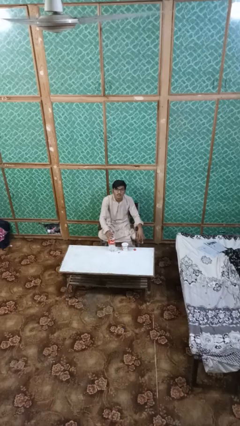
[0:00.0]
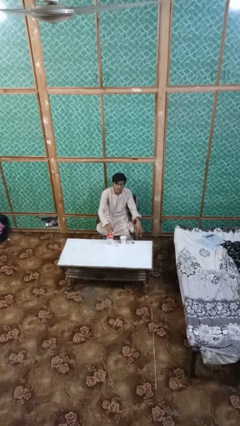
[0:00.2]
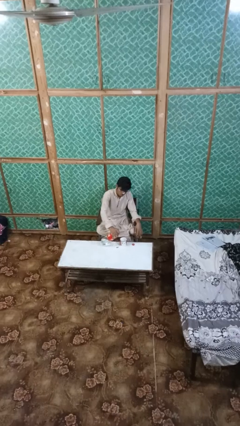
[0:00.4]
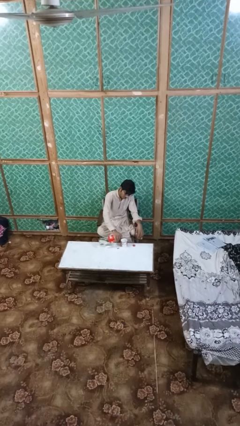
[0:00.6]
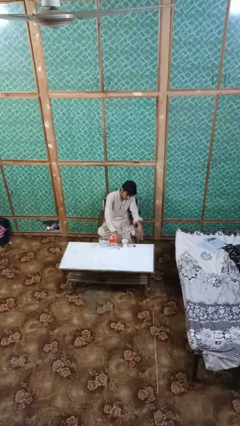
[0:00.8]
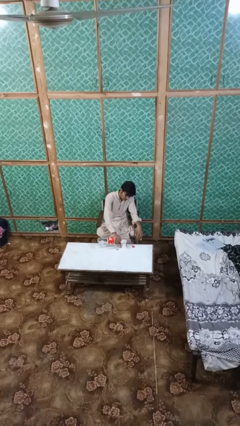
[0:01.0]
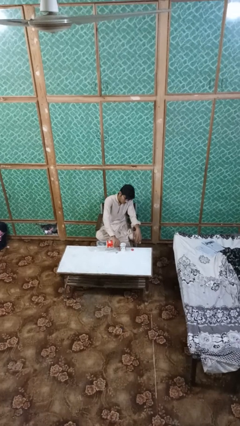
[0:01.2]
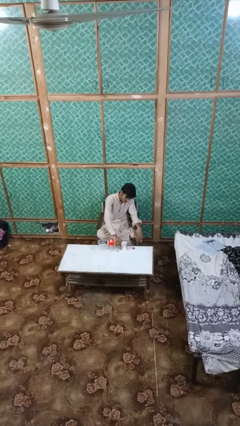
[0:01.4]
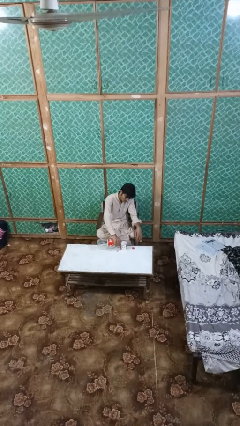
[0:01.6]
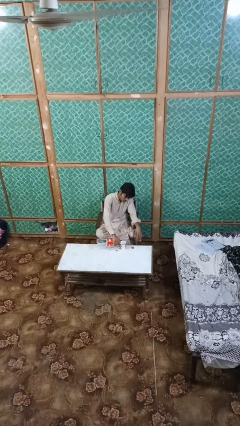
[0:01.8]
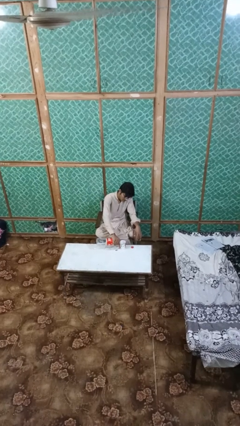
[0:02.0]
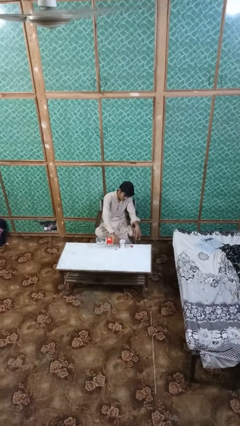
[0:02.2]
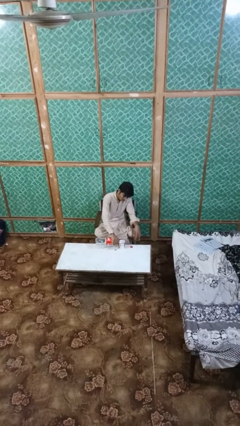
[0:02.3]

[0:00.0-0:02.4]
person pours liquid into cup

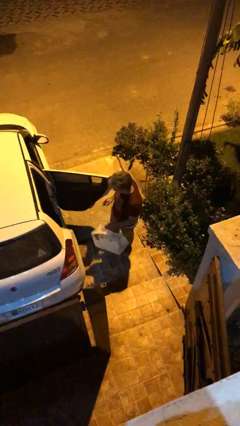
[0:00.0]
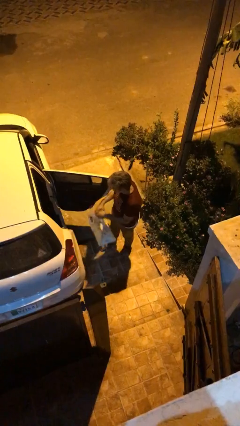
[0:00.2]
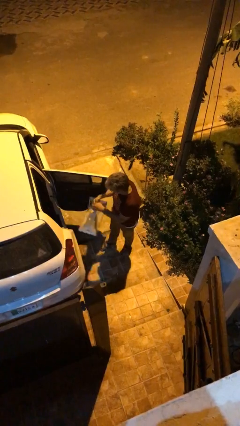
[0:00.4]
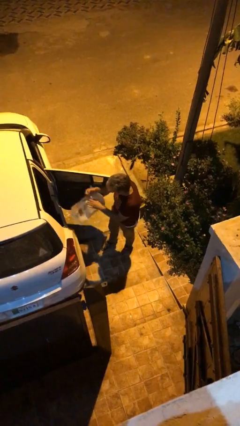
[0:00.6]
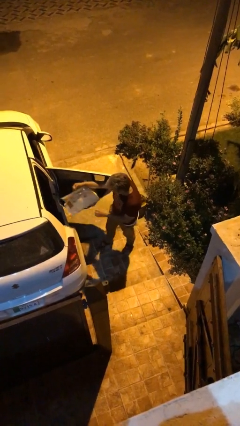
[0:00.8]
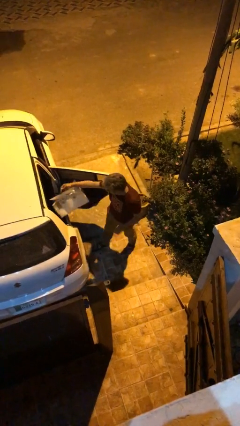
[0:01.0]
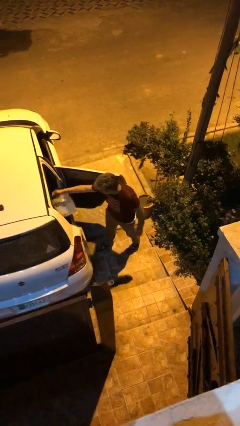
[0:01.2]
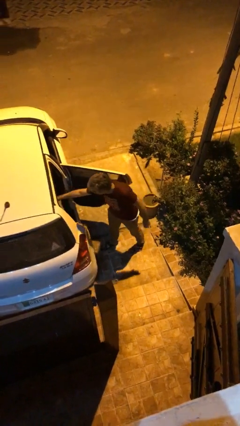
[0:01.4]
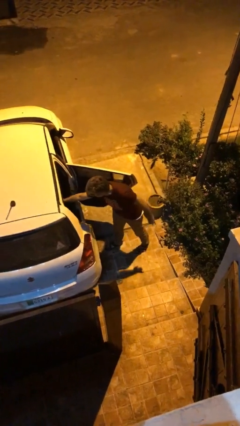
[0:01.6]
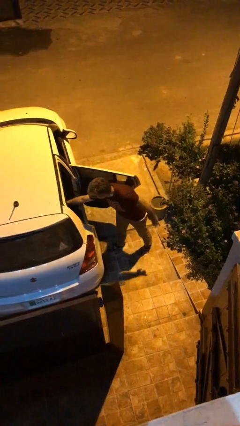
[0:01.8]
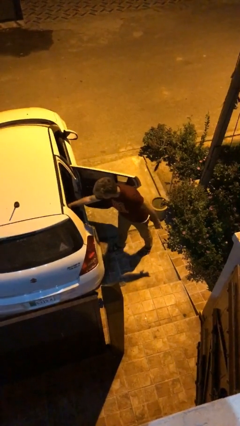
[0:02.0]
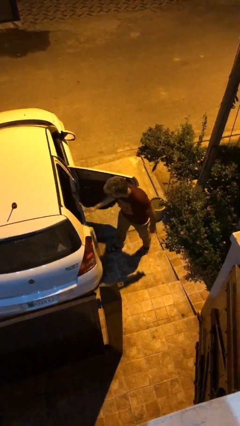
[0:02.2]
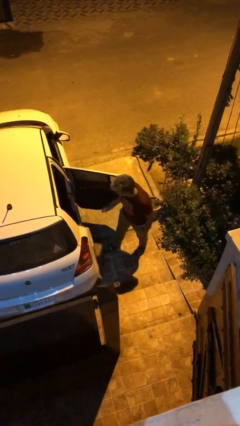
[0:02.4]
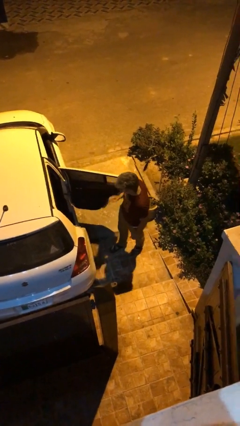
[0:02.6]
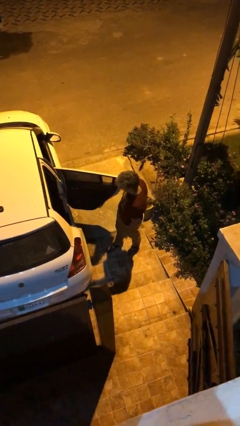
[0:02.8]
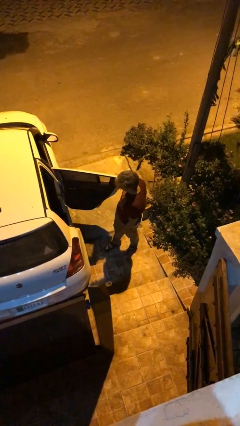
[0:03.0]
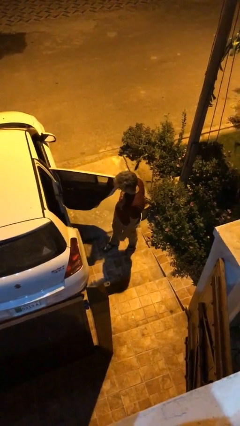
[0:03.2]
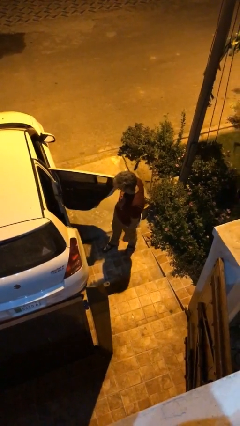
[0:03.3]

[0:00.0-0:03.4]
person loads car

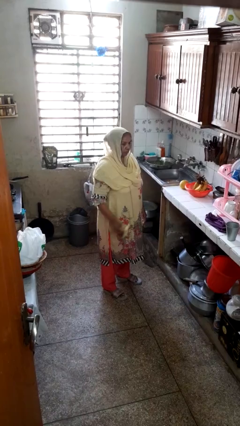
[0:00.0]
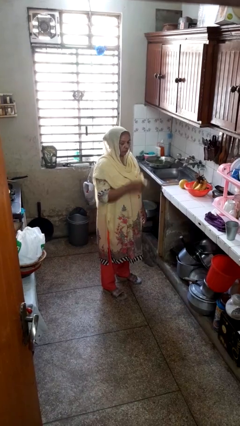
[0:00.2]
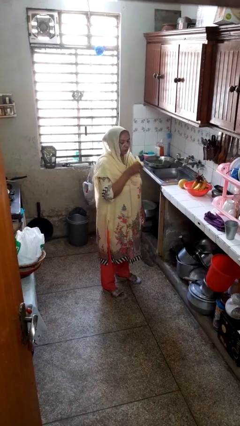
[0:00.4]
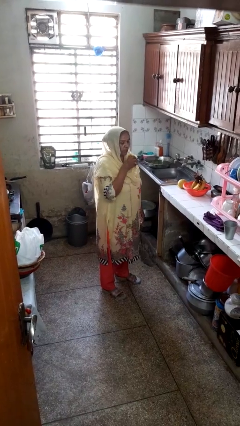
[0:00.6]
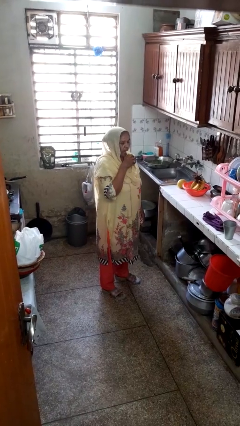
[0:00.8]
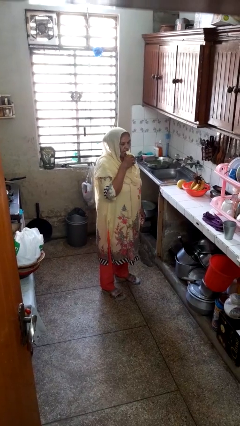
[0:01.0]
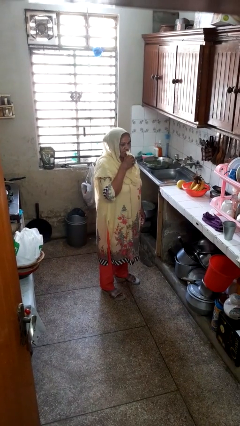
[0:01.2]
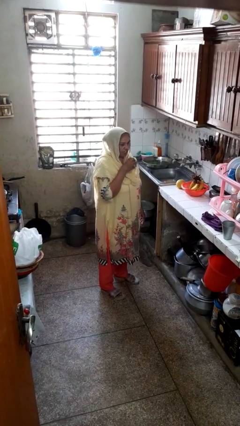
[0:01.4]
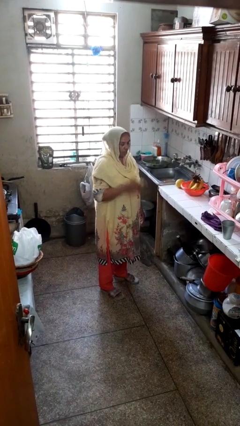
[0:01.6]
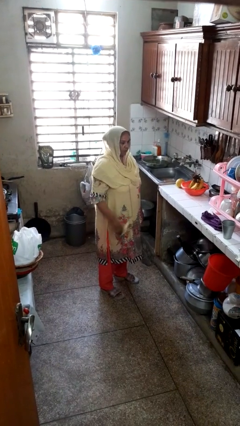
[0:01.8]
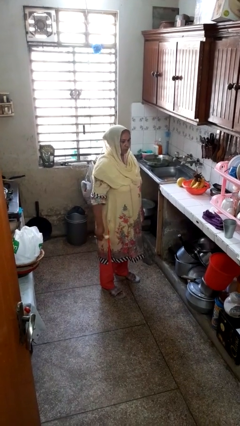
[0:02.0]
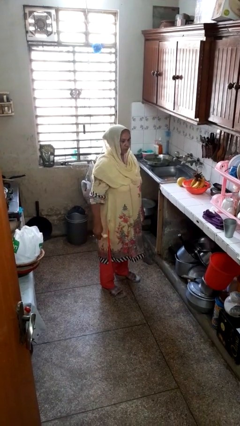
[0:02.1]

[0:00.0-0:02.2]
person eats banana

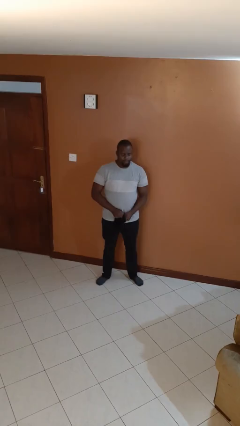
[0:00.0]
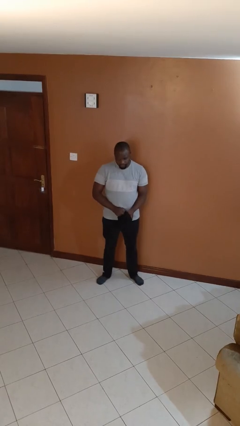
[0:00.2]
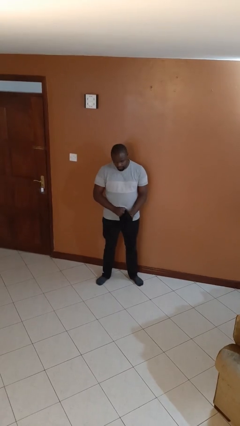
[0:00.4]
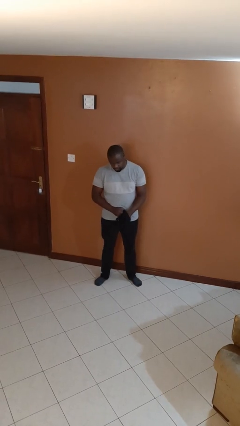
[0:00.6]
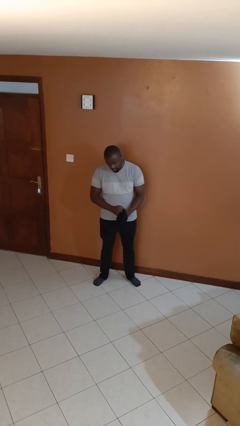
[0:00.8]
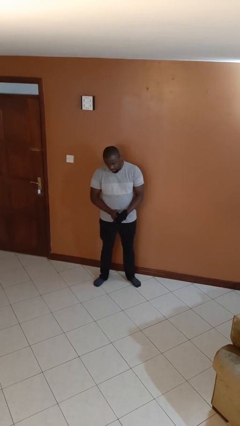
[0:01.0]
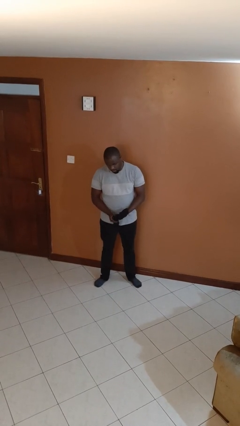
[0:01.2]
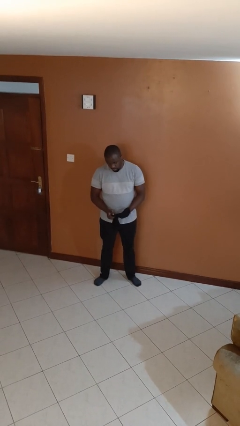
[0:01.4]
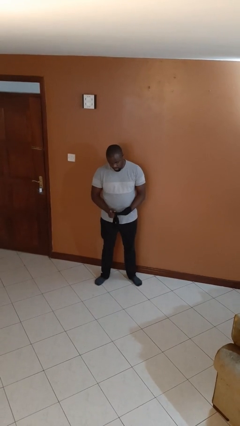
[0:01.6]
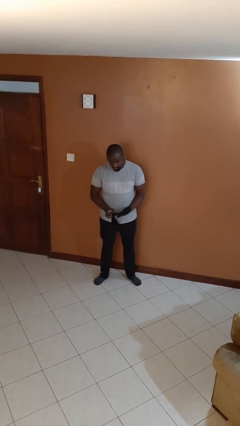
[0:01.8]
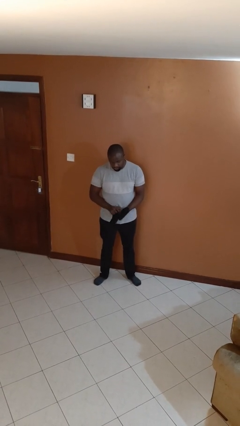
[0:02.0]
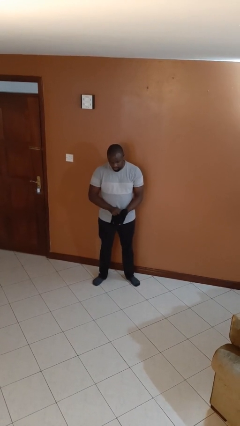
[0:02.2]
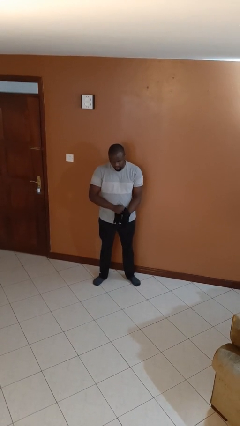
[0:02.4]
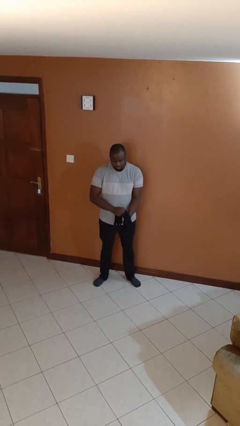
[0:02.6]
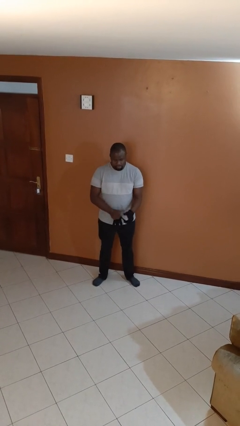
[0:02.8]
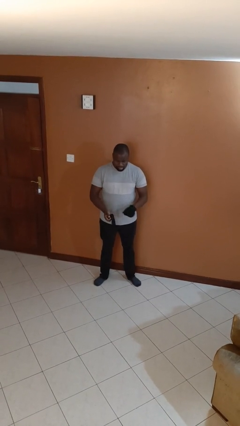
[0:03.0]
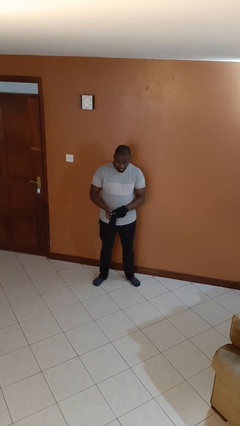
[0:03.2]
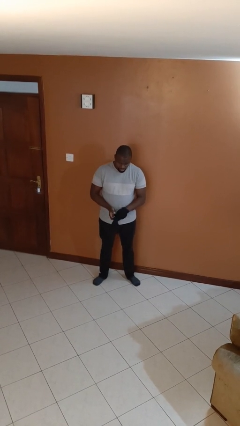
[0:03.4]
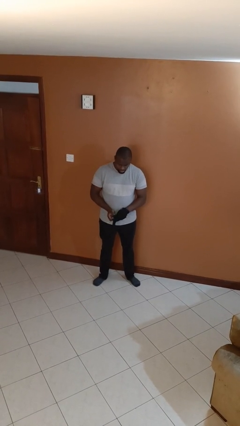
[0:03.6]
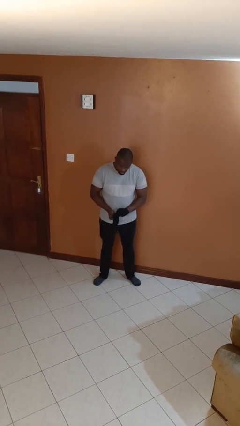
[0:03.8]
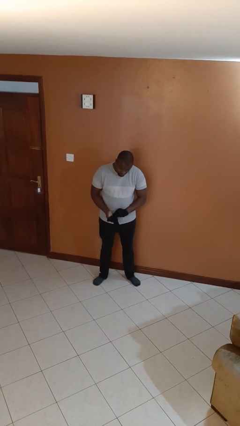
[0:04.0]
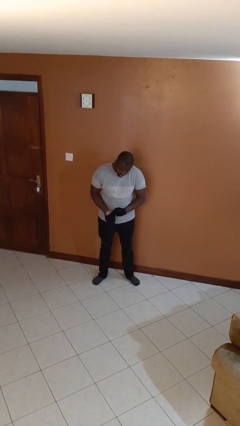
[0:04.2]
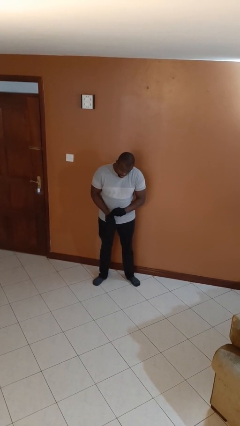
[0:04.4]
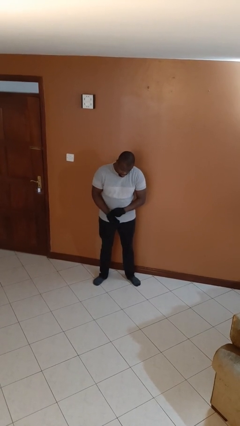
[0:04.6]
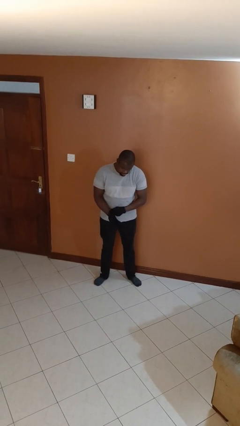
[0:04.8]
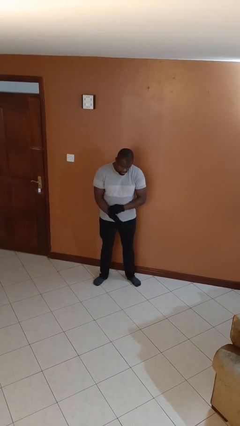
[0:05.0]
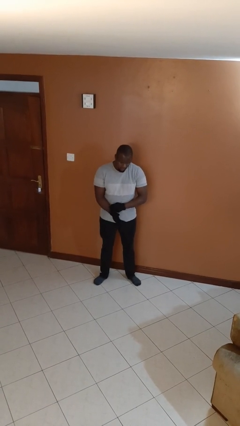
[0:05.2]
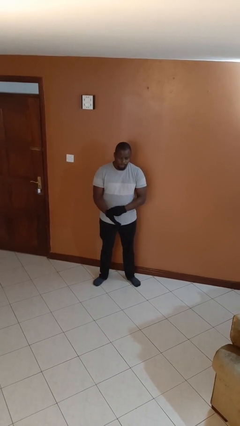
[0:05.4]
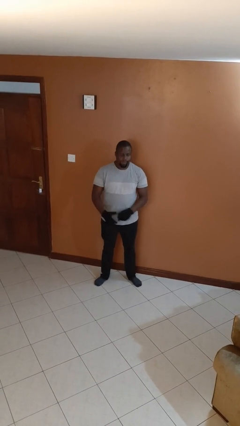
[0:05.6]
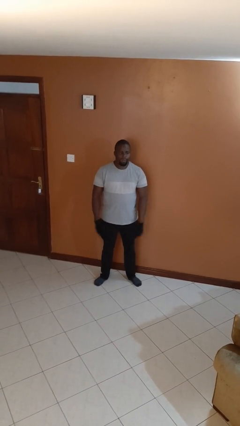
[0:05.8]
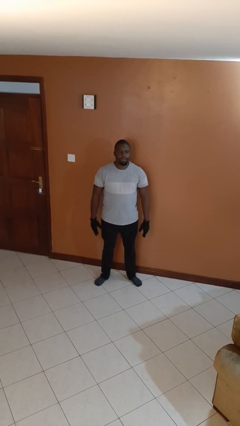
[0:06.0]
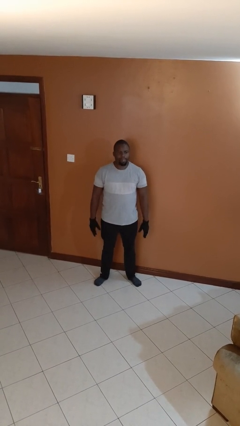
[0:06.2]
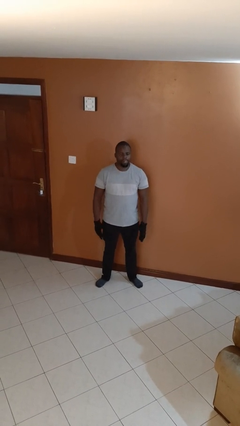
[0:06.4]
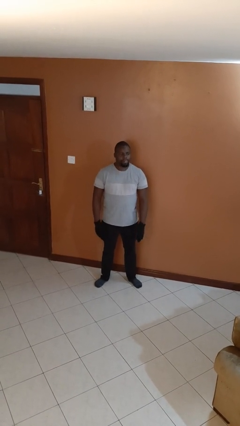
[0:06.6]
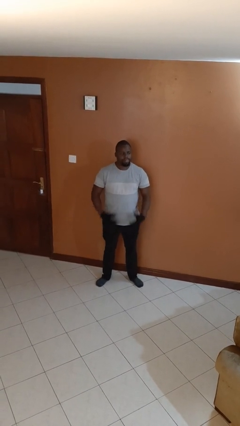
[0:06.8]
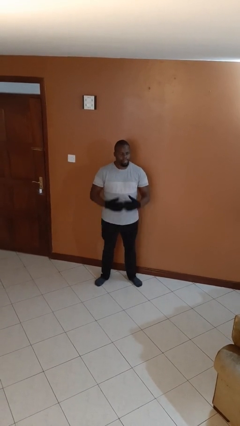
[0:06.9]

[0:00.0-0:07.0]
person puts on gloves

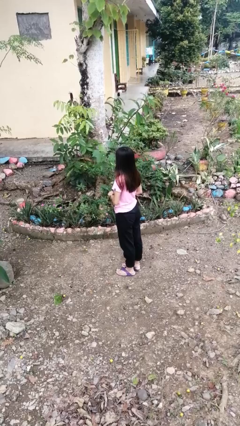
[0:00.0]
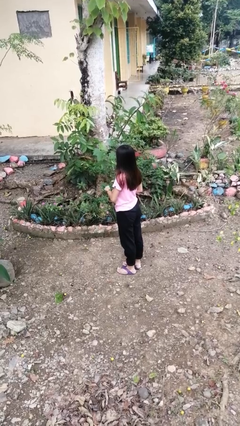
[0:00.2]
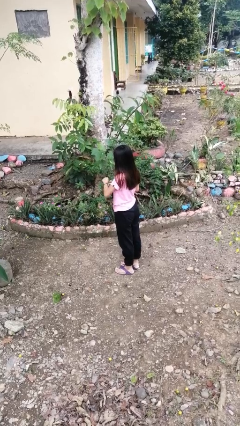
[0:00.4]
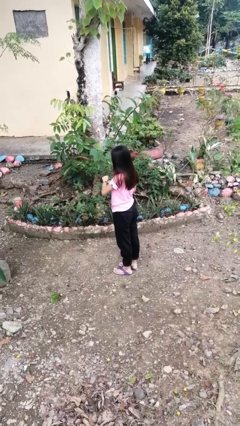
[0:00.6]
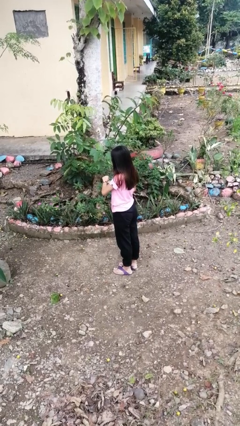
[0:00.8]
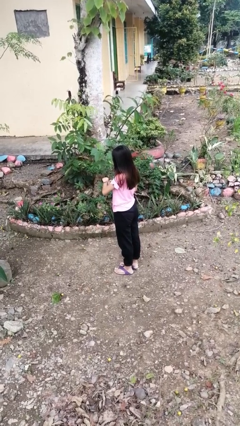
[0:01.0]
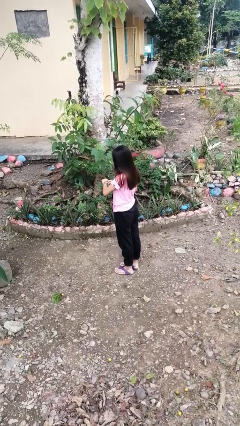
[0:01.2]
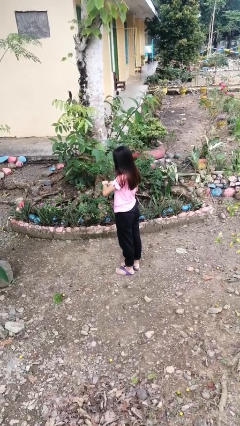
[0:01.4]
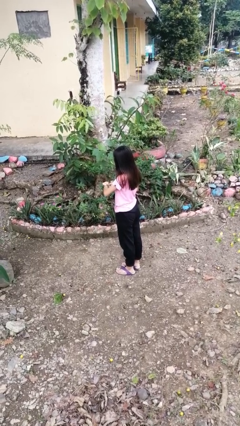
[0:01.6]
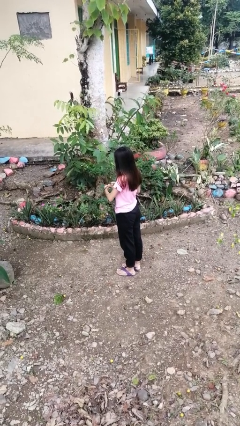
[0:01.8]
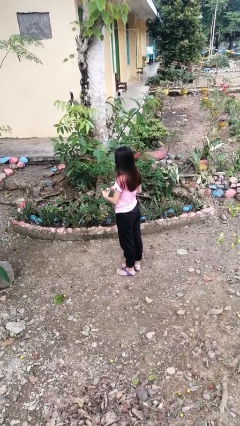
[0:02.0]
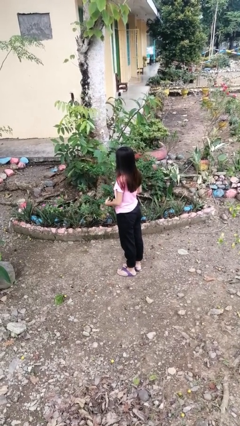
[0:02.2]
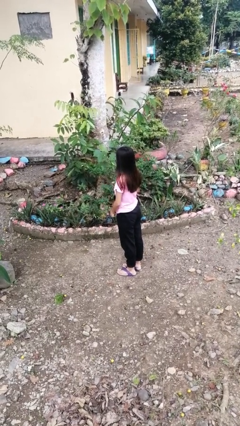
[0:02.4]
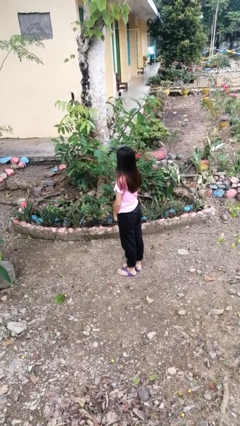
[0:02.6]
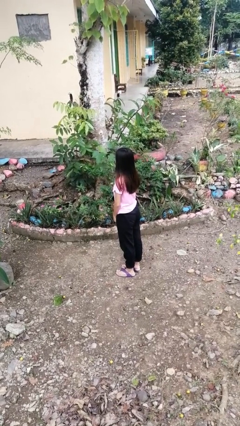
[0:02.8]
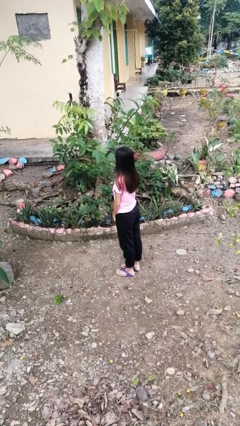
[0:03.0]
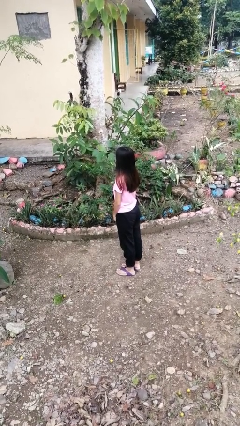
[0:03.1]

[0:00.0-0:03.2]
person takes off wristwatch
